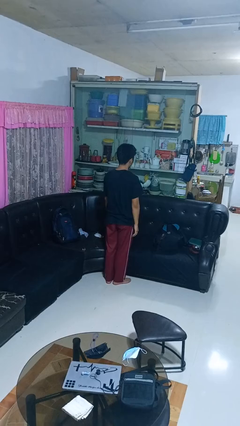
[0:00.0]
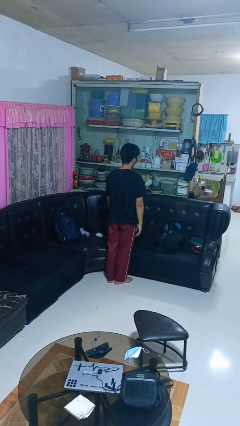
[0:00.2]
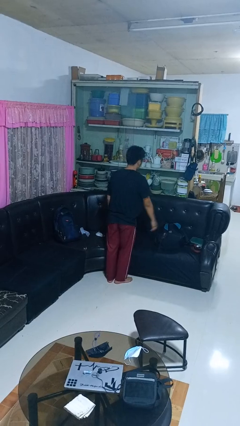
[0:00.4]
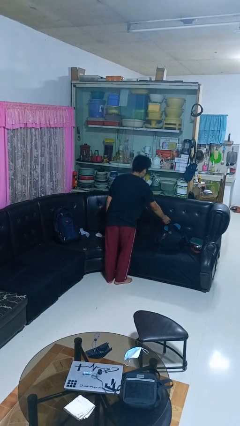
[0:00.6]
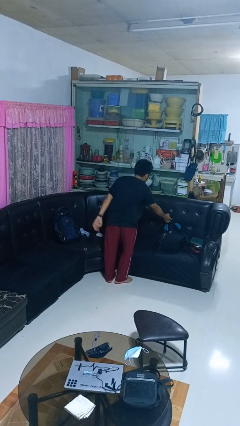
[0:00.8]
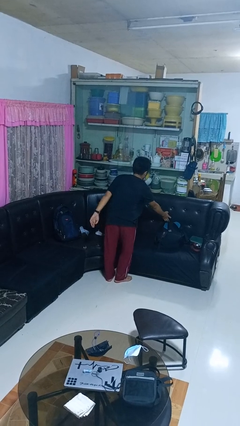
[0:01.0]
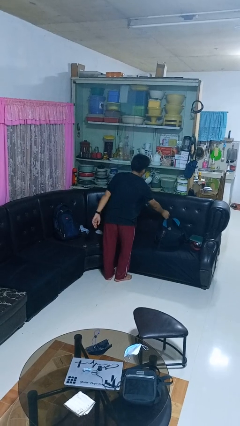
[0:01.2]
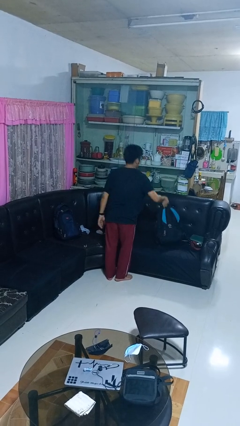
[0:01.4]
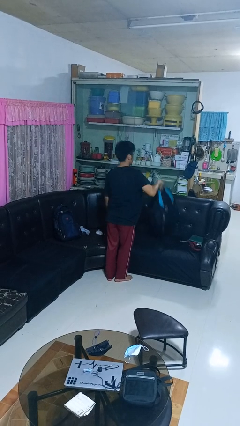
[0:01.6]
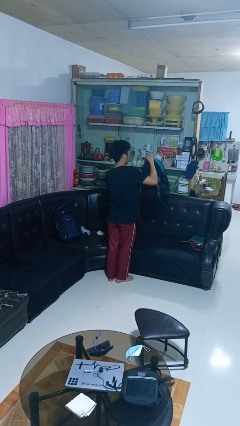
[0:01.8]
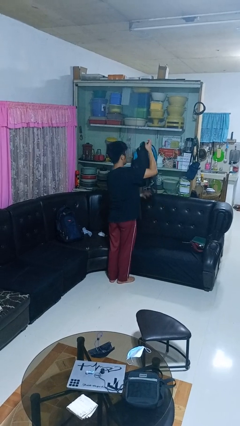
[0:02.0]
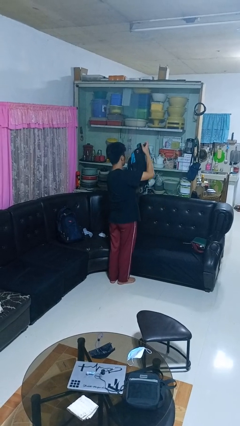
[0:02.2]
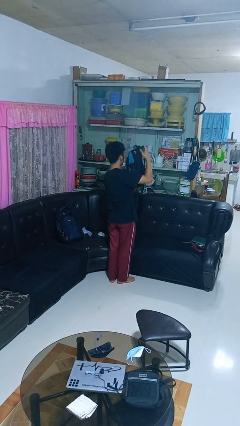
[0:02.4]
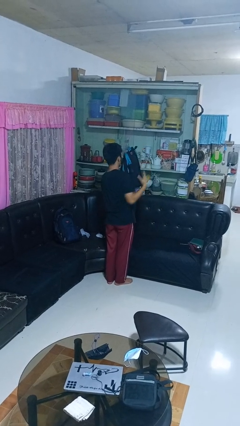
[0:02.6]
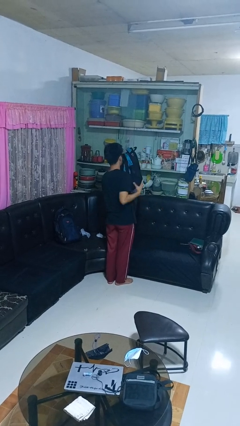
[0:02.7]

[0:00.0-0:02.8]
person picks up object from couch

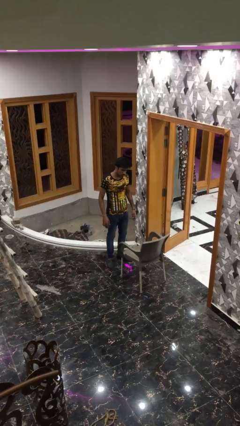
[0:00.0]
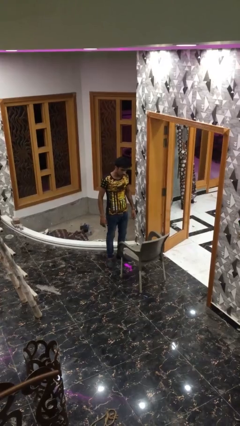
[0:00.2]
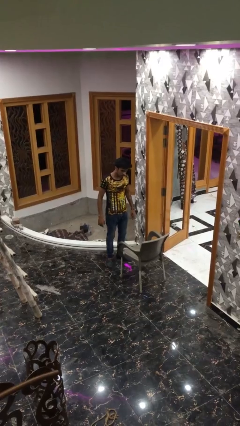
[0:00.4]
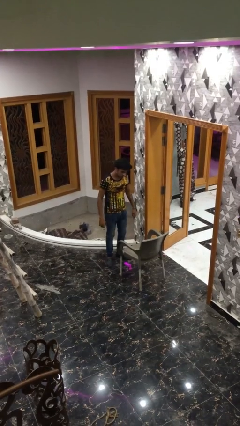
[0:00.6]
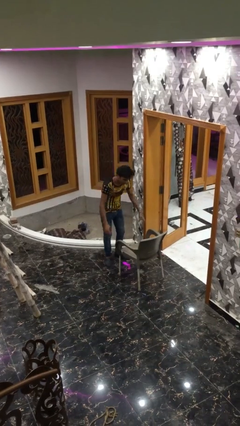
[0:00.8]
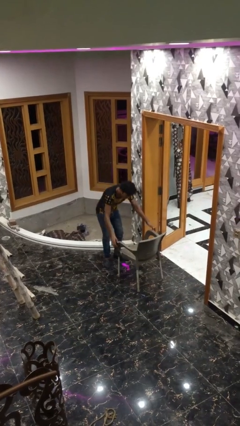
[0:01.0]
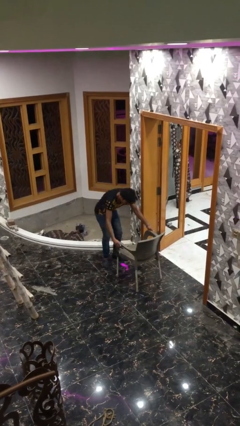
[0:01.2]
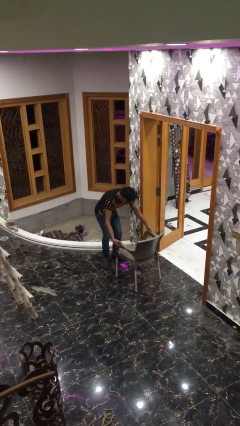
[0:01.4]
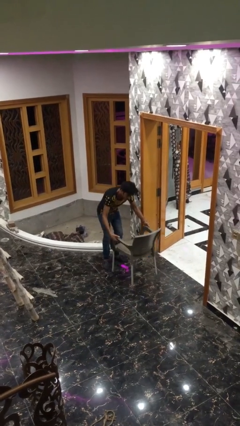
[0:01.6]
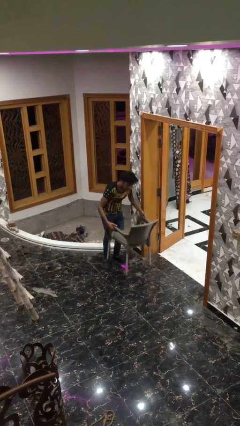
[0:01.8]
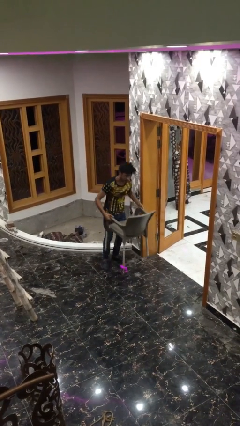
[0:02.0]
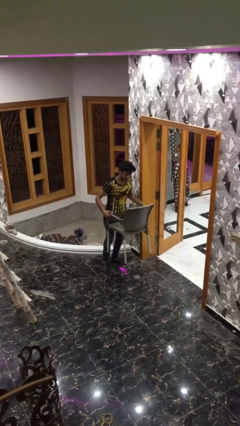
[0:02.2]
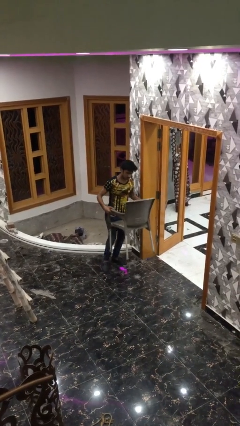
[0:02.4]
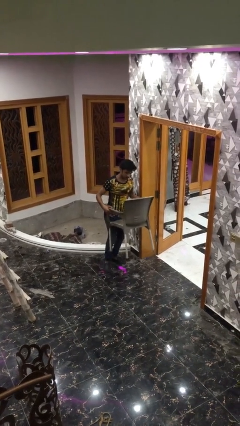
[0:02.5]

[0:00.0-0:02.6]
person picks up object from floor

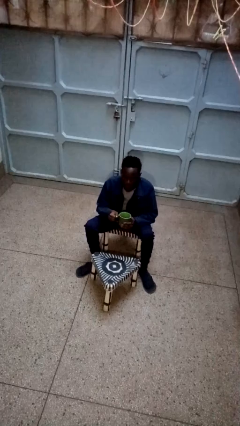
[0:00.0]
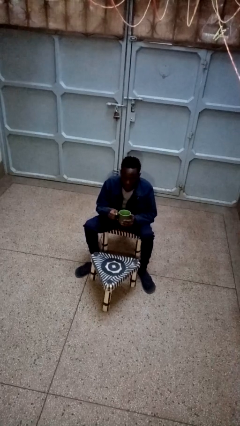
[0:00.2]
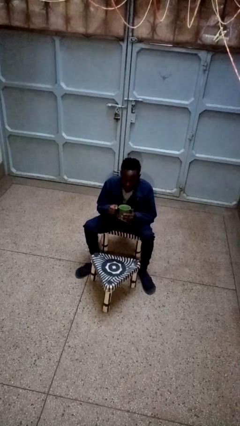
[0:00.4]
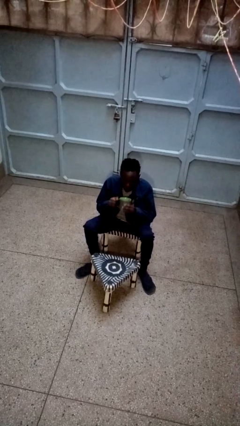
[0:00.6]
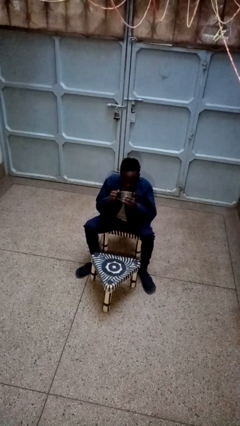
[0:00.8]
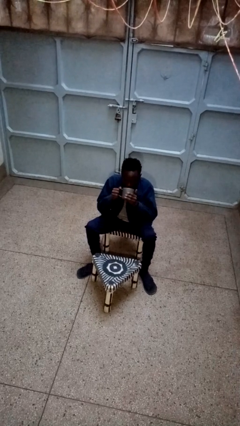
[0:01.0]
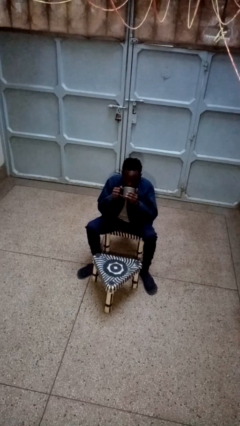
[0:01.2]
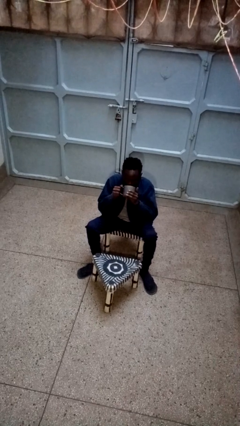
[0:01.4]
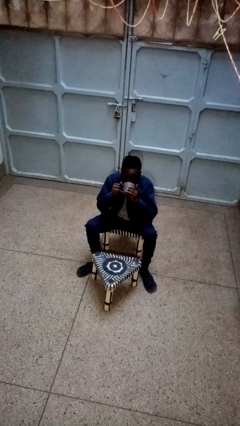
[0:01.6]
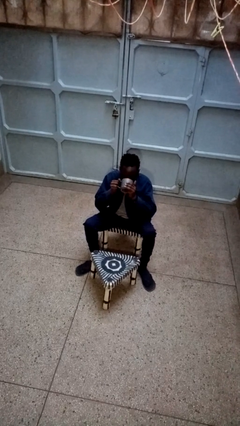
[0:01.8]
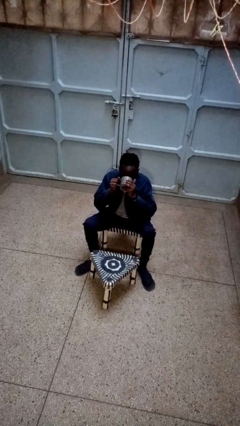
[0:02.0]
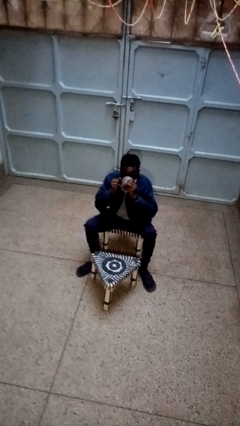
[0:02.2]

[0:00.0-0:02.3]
person drinks from mug

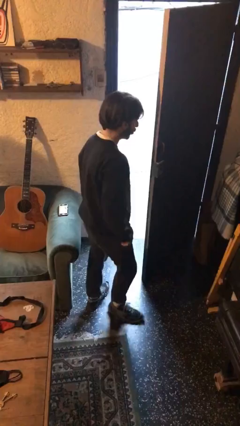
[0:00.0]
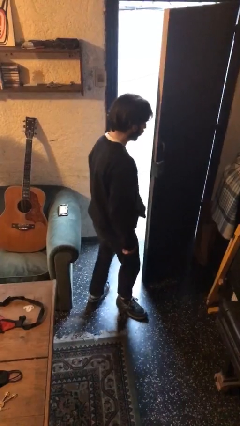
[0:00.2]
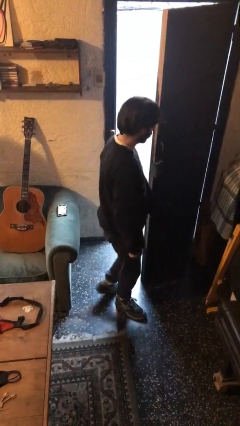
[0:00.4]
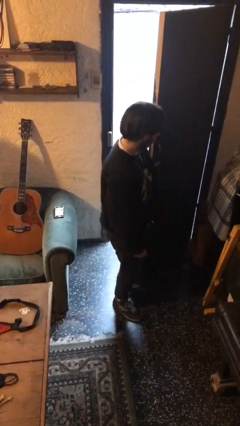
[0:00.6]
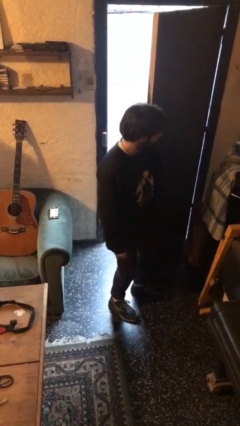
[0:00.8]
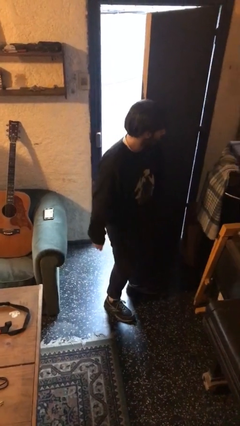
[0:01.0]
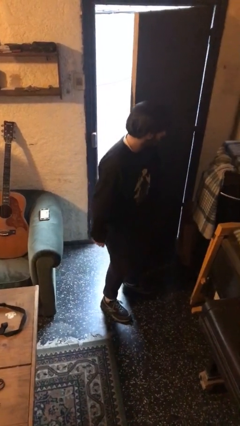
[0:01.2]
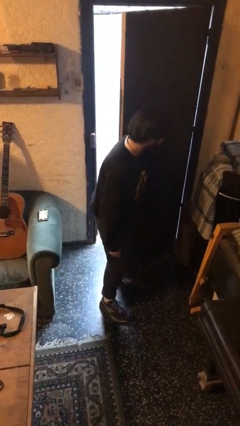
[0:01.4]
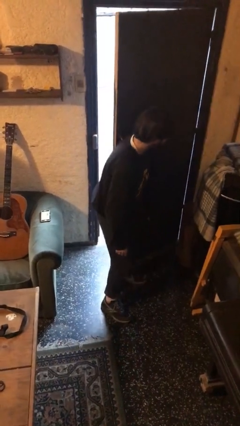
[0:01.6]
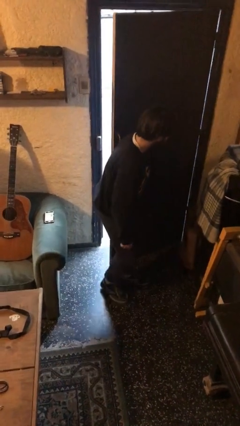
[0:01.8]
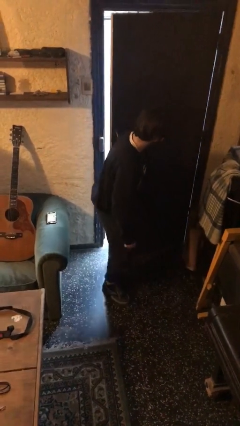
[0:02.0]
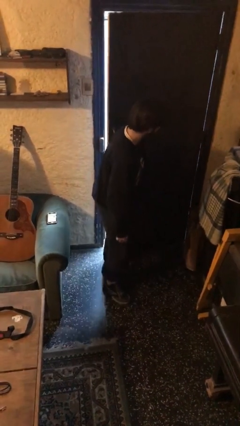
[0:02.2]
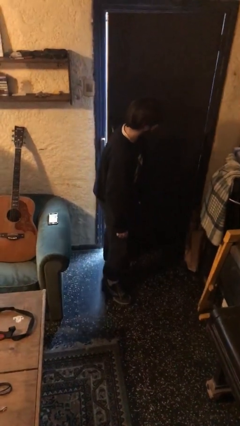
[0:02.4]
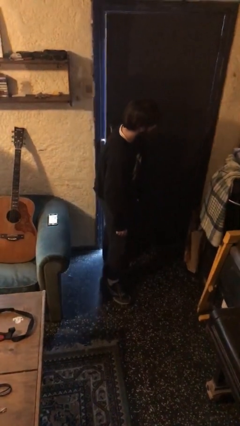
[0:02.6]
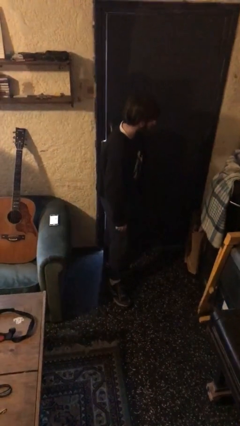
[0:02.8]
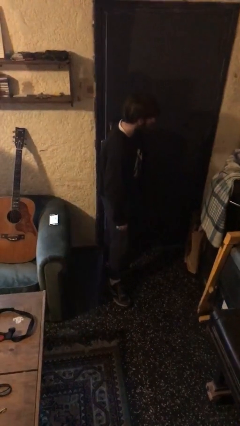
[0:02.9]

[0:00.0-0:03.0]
person closes door with hip

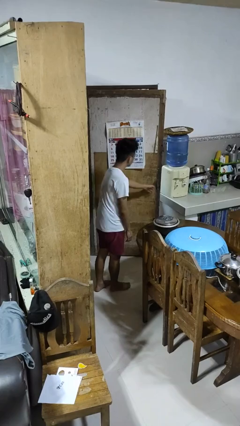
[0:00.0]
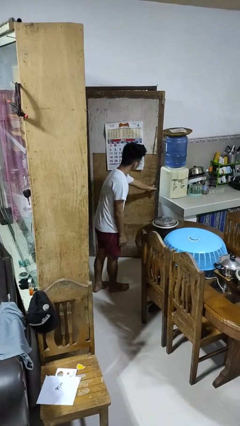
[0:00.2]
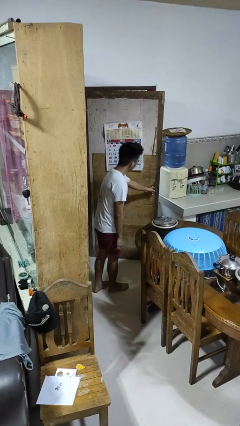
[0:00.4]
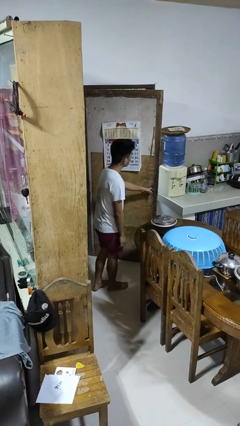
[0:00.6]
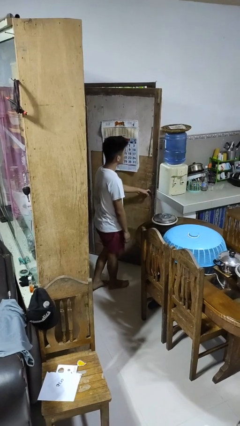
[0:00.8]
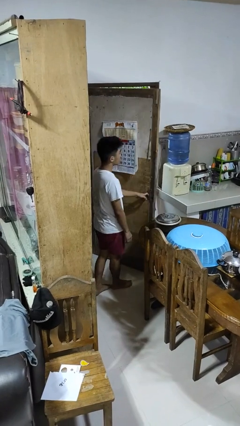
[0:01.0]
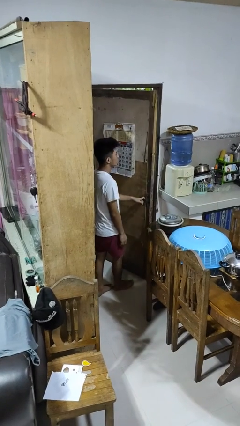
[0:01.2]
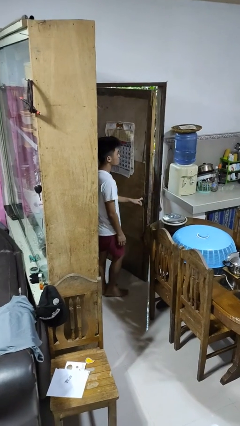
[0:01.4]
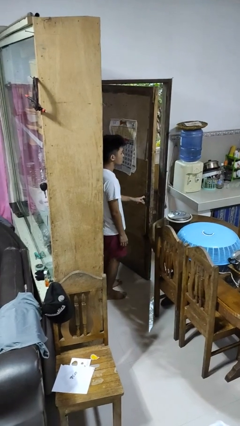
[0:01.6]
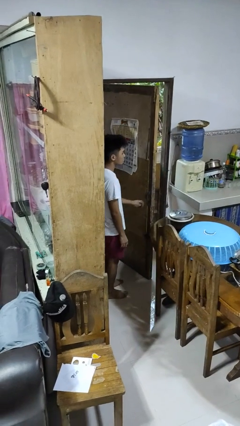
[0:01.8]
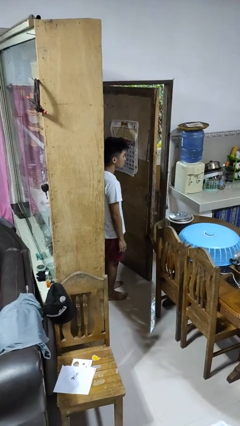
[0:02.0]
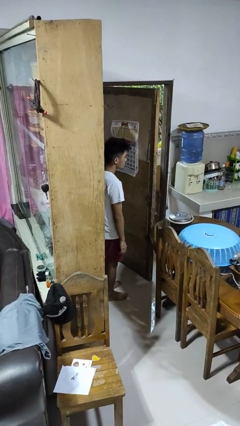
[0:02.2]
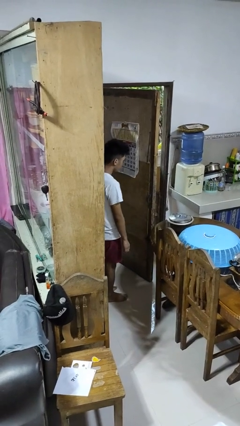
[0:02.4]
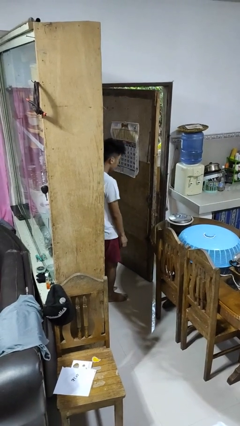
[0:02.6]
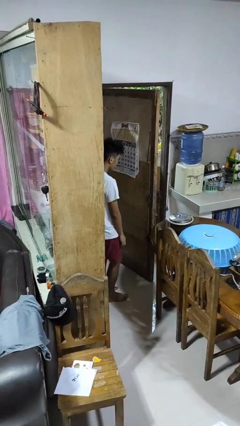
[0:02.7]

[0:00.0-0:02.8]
person opens facility door

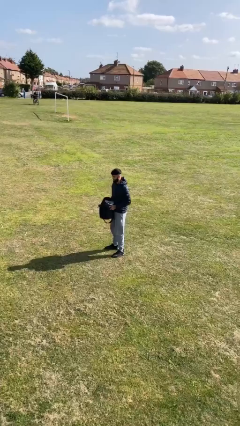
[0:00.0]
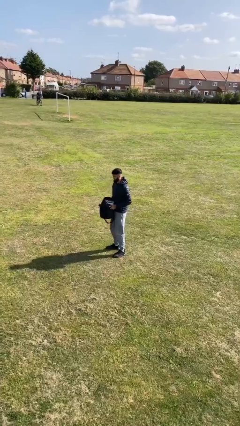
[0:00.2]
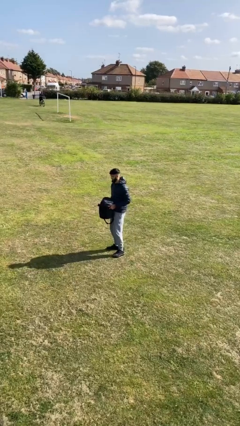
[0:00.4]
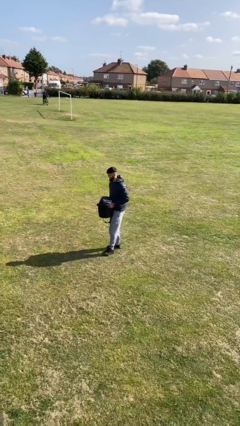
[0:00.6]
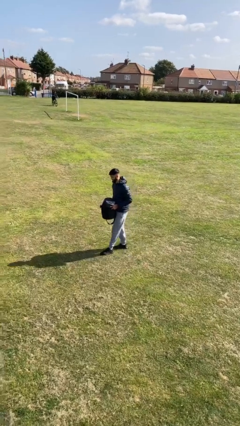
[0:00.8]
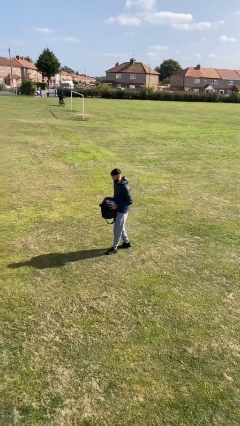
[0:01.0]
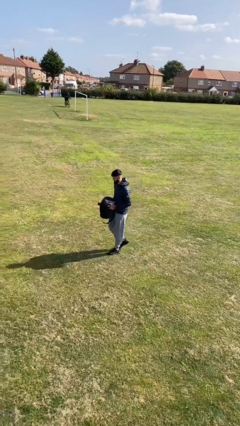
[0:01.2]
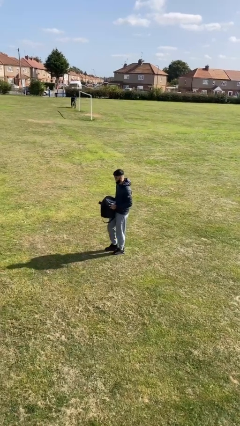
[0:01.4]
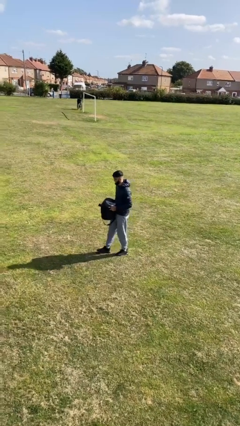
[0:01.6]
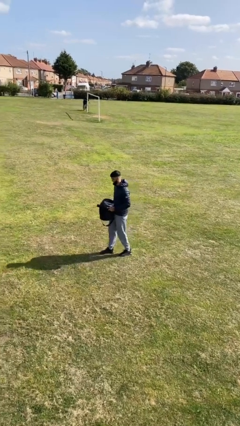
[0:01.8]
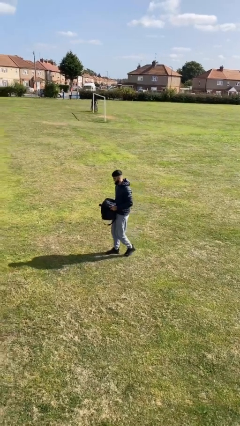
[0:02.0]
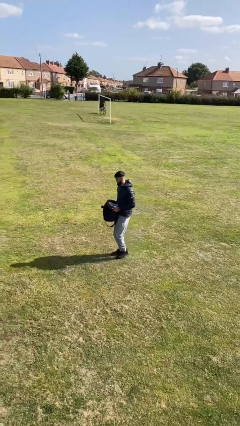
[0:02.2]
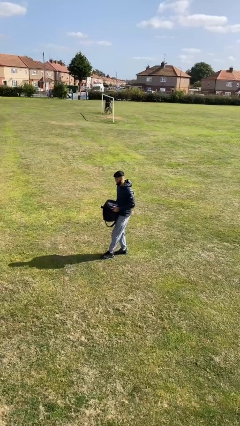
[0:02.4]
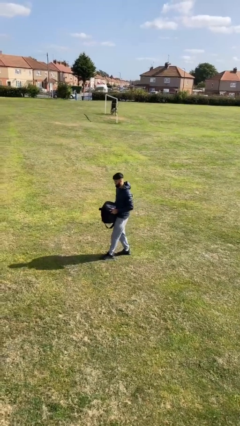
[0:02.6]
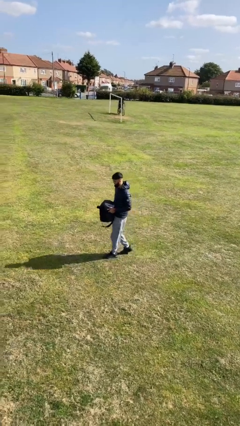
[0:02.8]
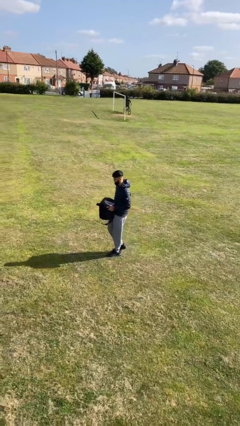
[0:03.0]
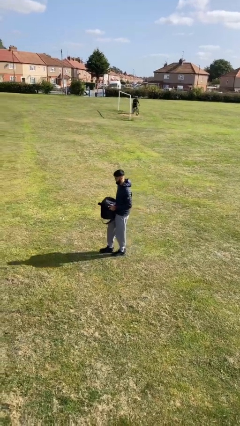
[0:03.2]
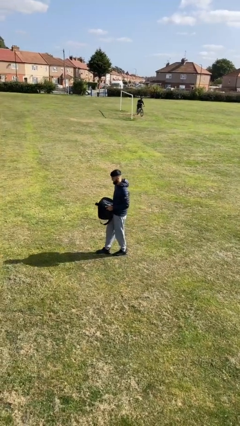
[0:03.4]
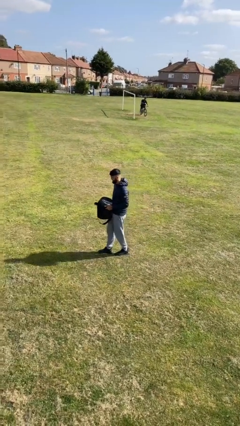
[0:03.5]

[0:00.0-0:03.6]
person carries heavy object

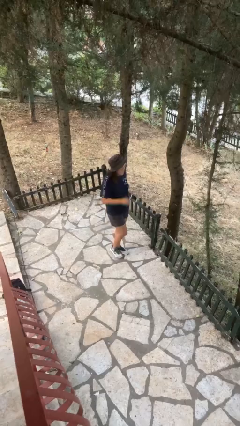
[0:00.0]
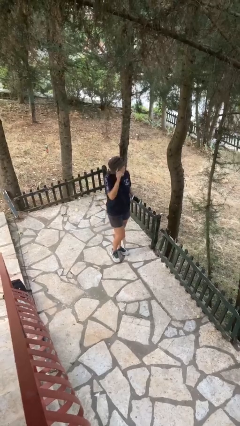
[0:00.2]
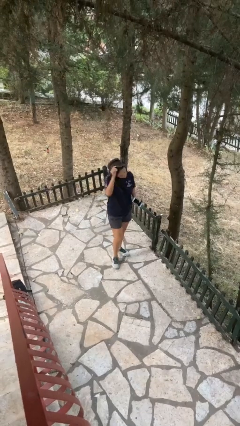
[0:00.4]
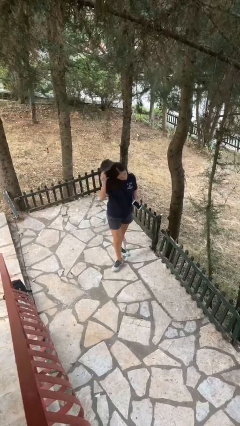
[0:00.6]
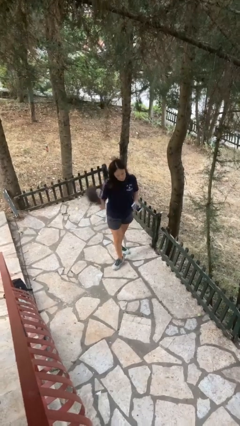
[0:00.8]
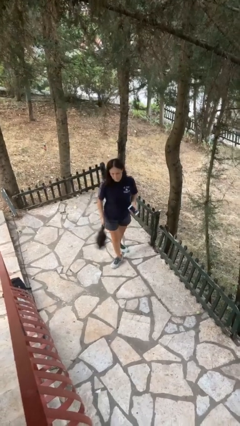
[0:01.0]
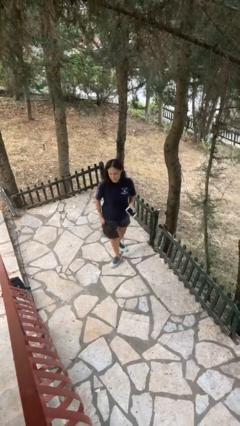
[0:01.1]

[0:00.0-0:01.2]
person takes off hat
